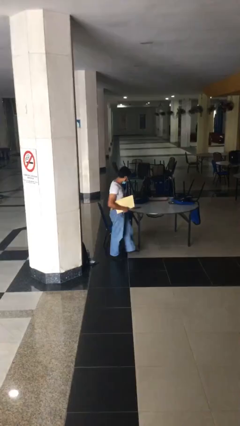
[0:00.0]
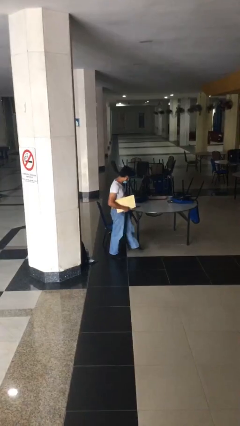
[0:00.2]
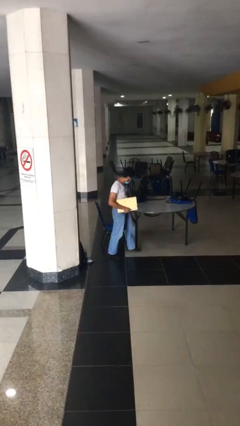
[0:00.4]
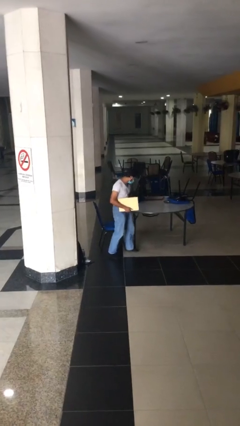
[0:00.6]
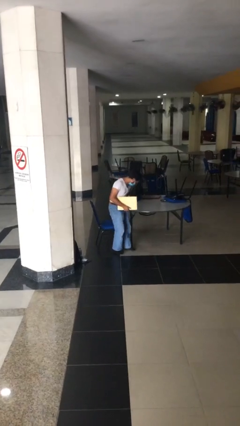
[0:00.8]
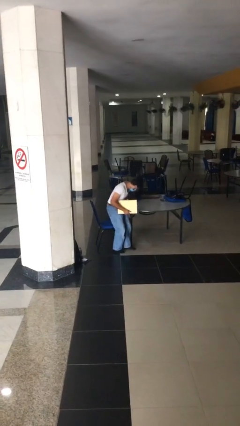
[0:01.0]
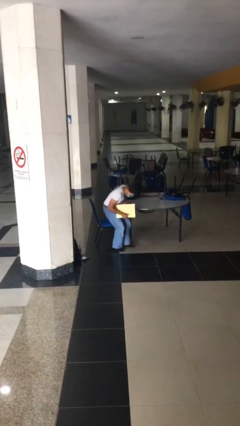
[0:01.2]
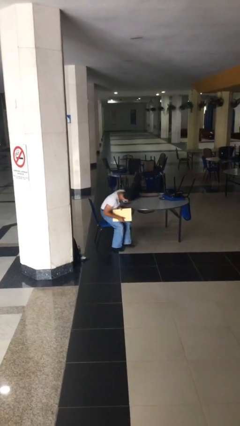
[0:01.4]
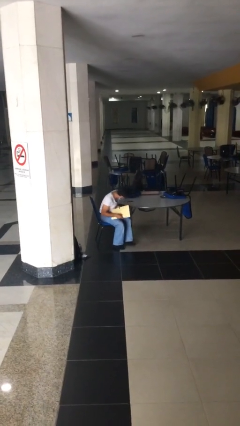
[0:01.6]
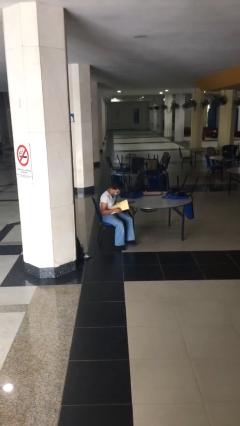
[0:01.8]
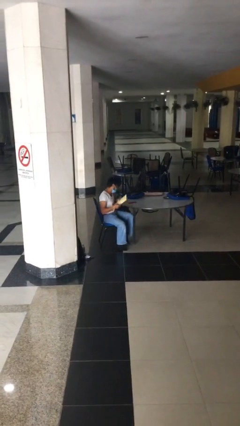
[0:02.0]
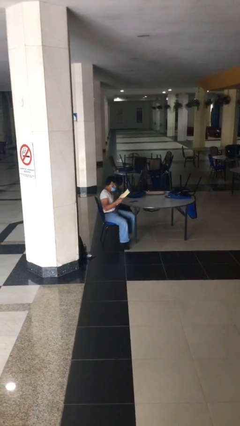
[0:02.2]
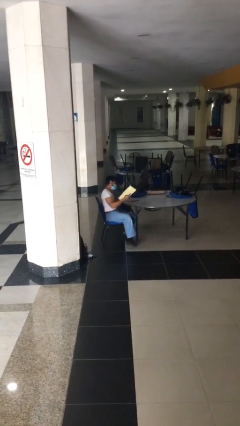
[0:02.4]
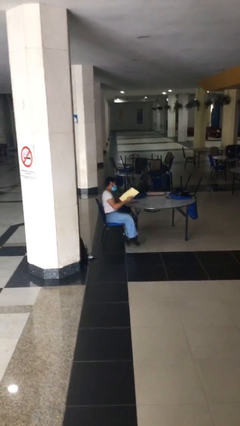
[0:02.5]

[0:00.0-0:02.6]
person sits down

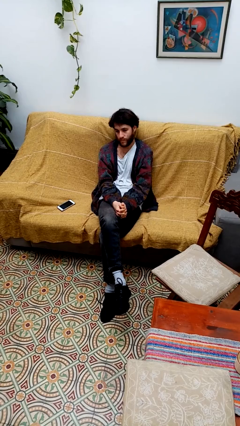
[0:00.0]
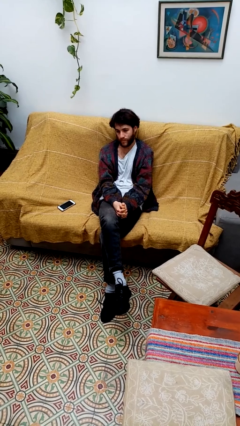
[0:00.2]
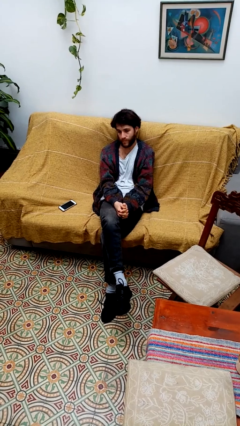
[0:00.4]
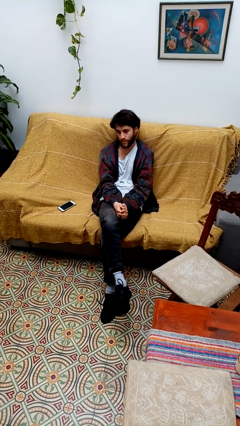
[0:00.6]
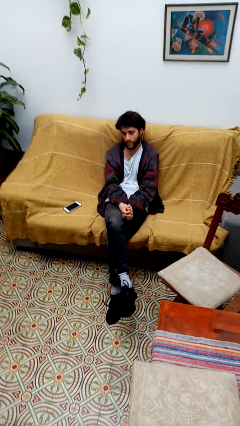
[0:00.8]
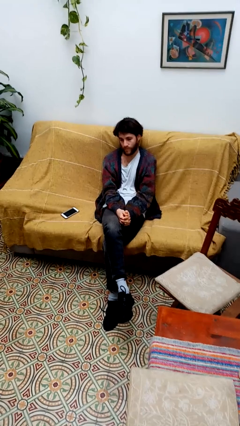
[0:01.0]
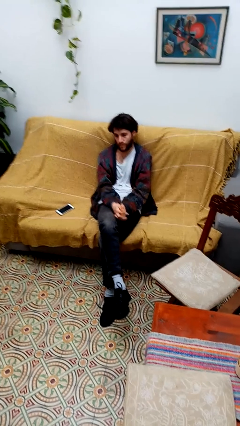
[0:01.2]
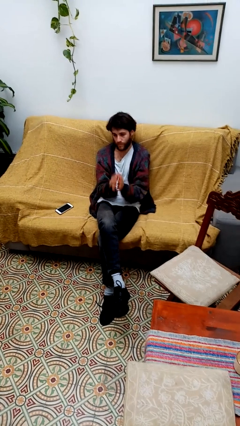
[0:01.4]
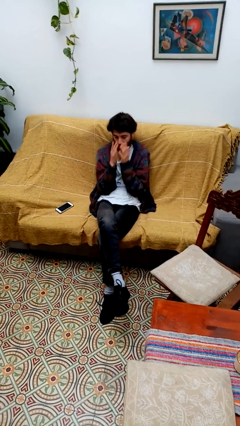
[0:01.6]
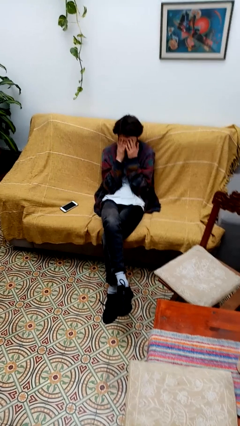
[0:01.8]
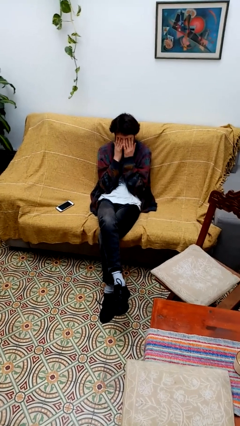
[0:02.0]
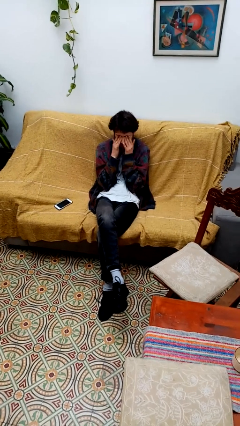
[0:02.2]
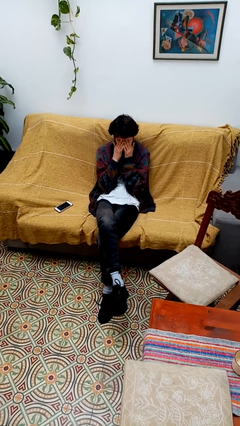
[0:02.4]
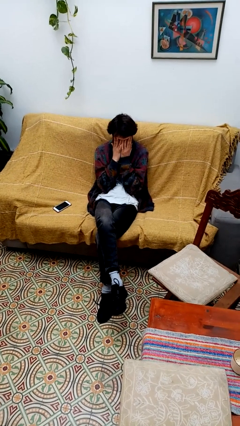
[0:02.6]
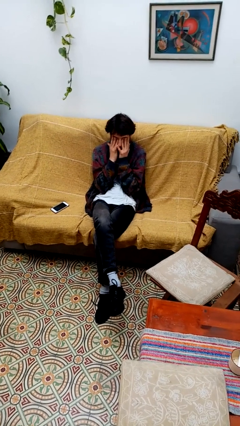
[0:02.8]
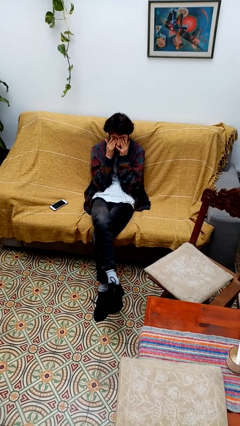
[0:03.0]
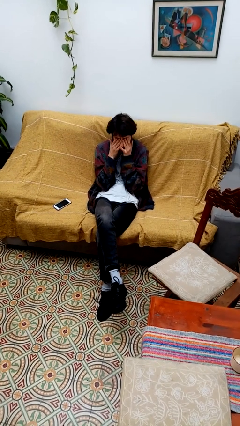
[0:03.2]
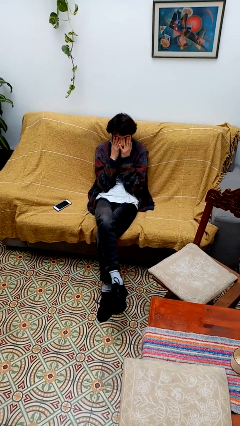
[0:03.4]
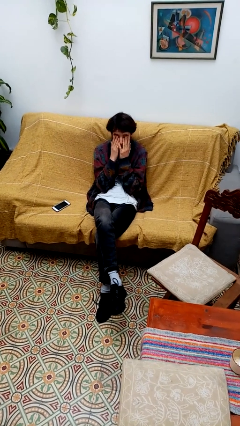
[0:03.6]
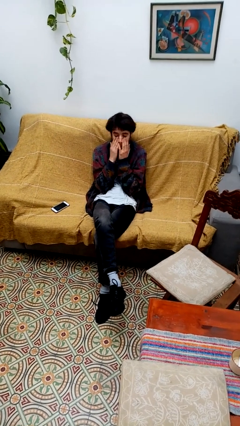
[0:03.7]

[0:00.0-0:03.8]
person rubs eyes

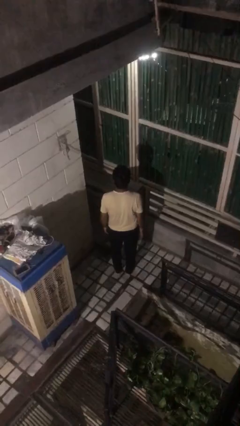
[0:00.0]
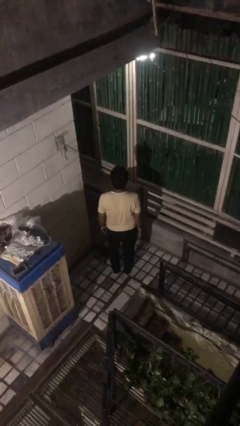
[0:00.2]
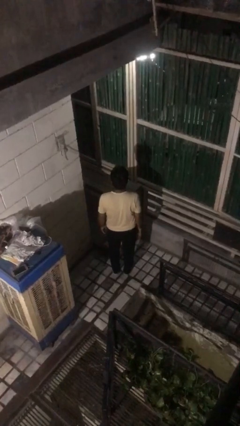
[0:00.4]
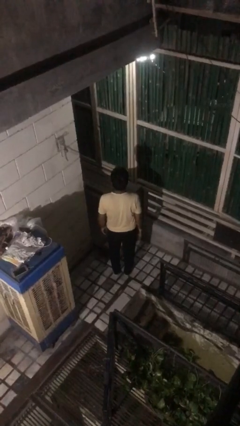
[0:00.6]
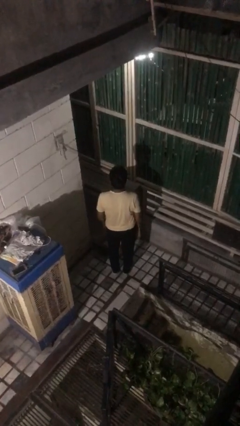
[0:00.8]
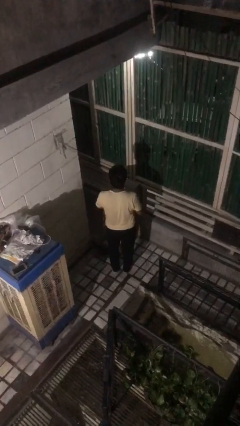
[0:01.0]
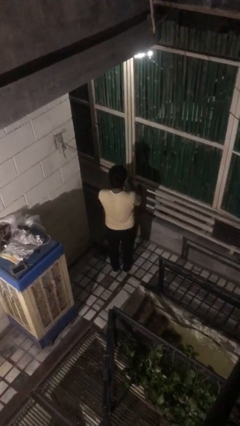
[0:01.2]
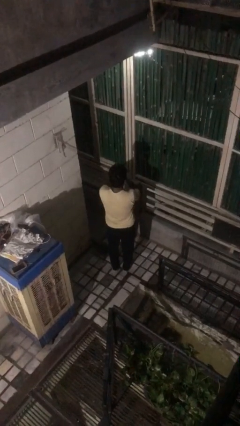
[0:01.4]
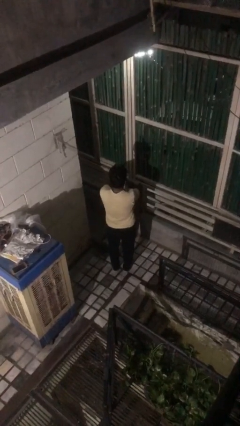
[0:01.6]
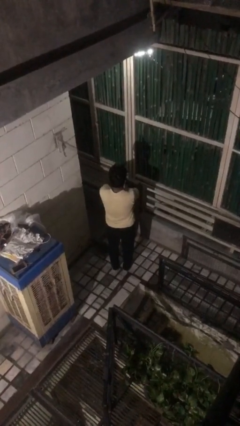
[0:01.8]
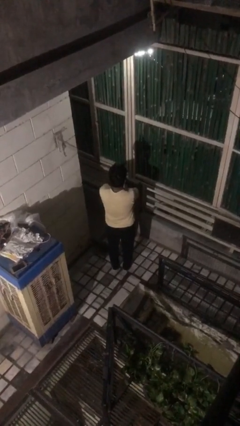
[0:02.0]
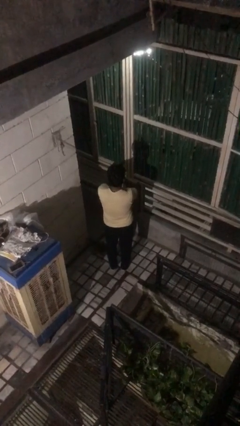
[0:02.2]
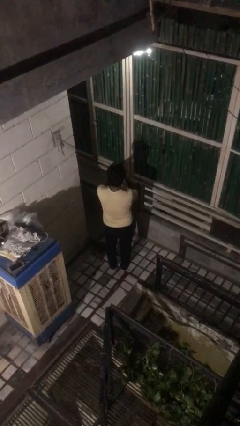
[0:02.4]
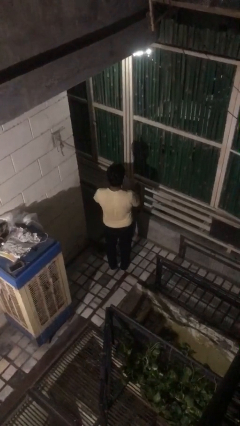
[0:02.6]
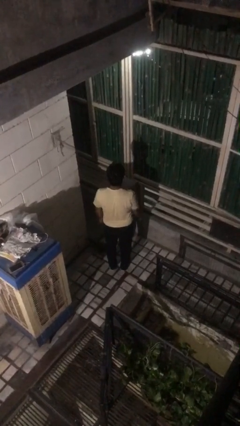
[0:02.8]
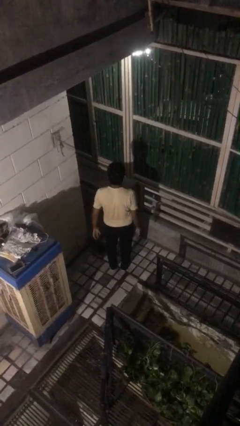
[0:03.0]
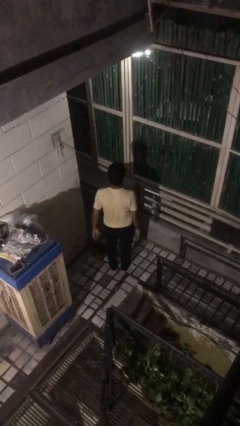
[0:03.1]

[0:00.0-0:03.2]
person covers face with hands

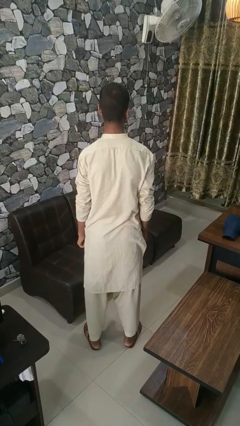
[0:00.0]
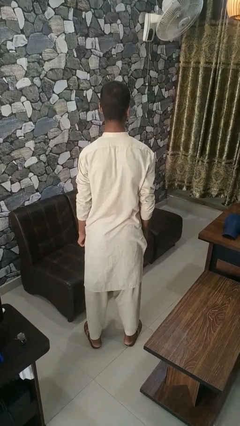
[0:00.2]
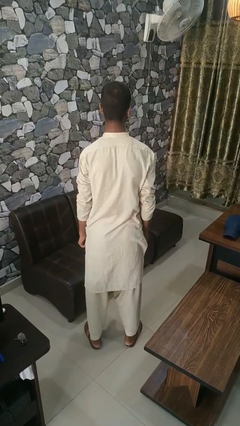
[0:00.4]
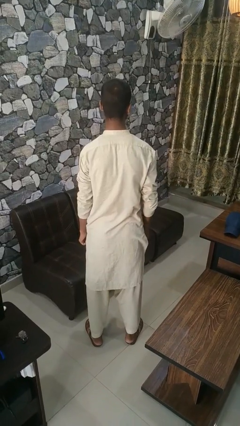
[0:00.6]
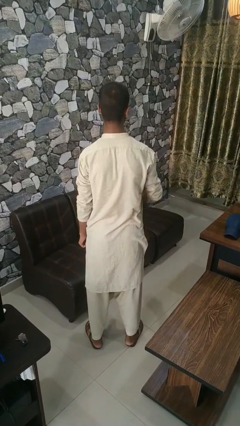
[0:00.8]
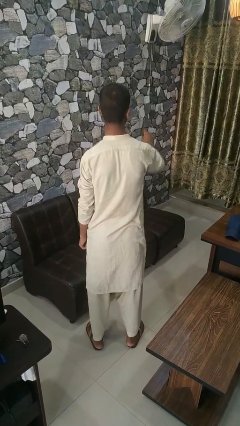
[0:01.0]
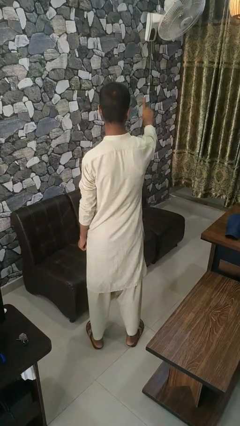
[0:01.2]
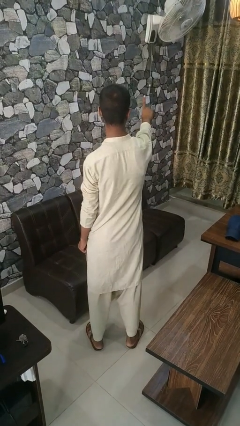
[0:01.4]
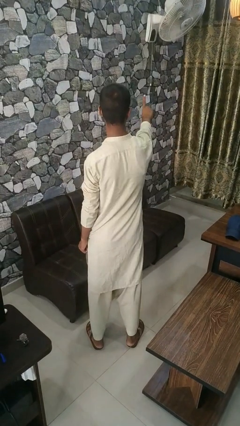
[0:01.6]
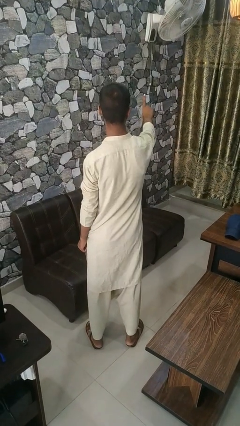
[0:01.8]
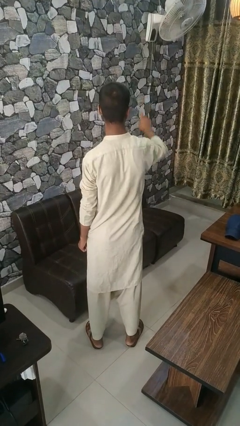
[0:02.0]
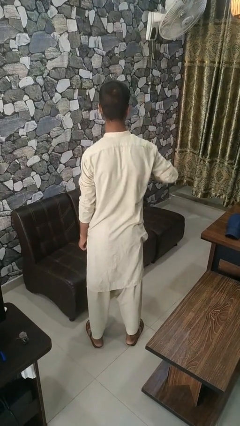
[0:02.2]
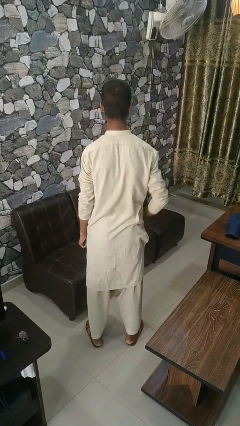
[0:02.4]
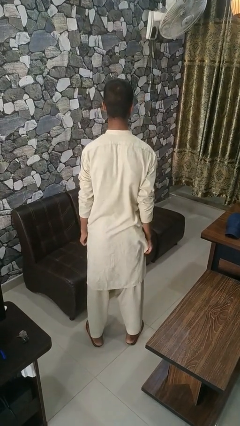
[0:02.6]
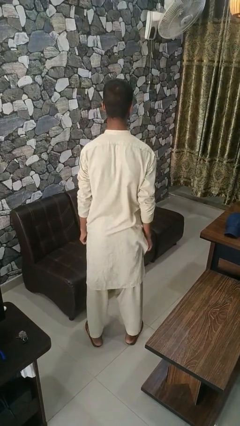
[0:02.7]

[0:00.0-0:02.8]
person gestures number one

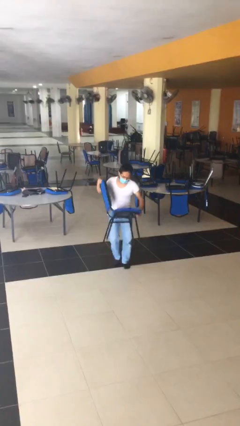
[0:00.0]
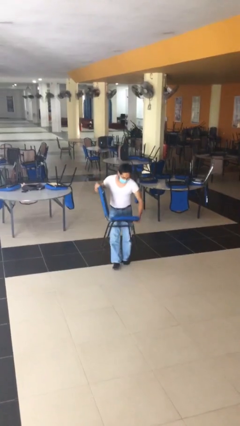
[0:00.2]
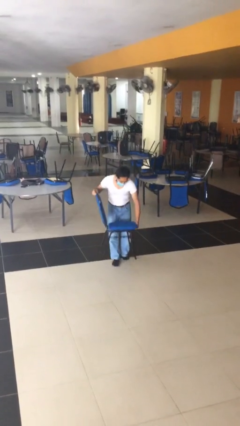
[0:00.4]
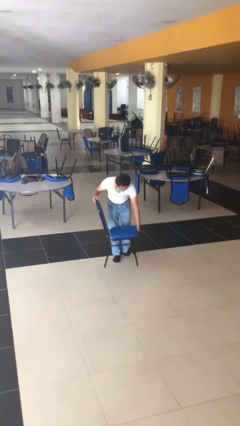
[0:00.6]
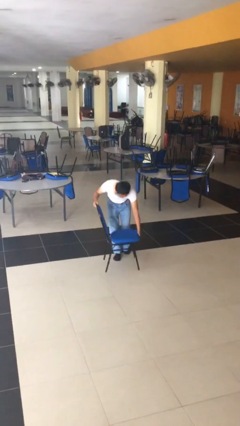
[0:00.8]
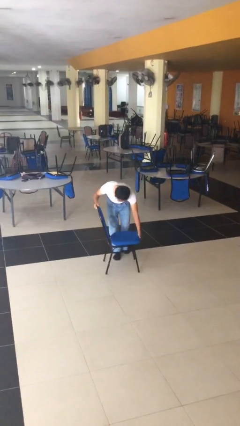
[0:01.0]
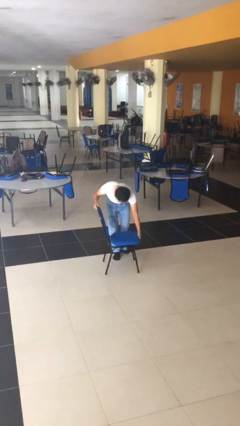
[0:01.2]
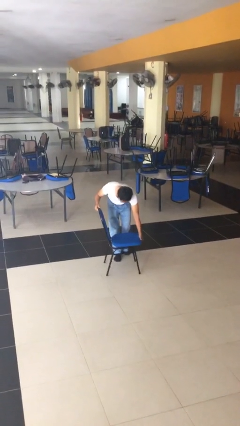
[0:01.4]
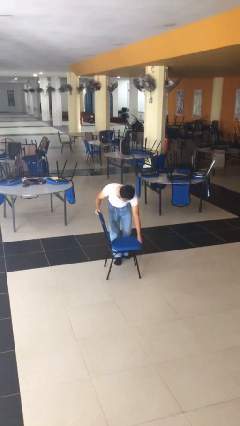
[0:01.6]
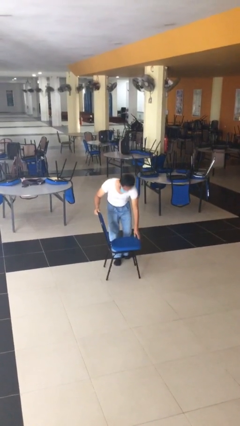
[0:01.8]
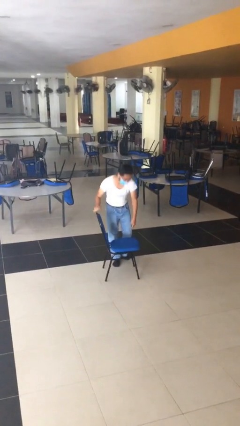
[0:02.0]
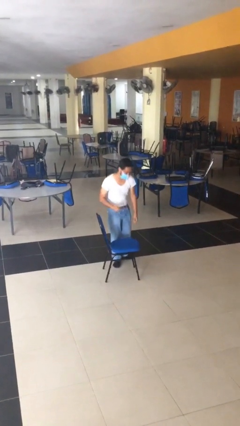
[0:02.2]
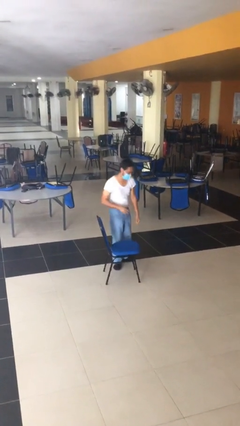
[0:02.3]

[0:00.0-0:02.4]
person puts down object on floor

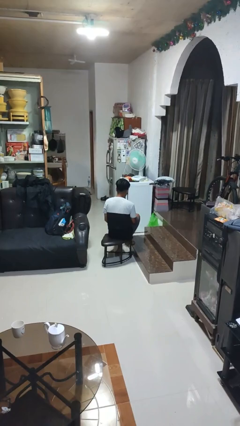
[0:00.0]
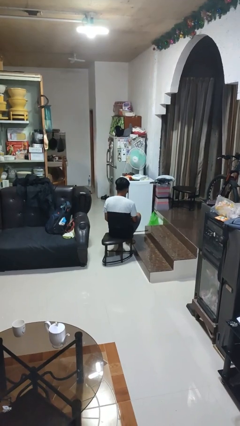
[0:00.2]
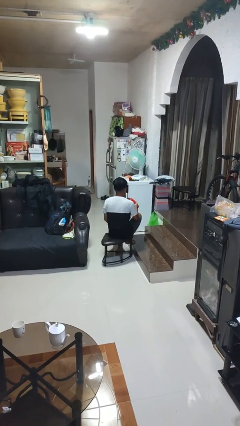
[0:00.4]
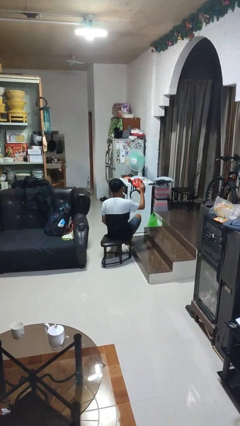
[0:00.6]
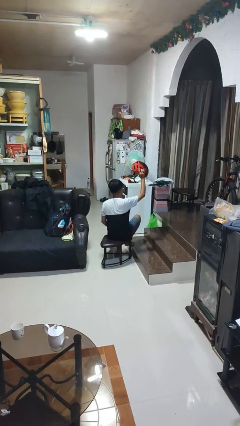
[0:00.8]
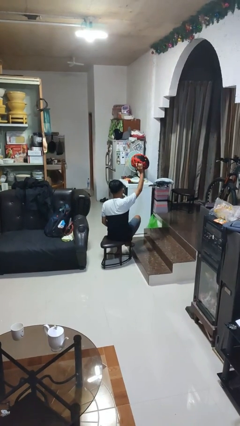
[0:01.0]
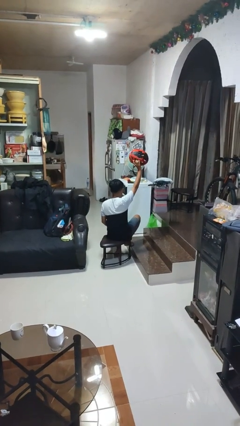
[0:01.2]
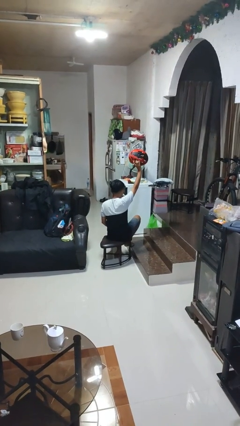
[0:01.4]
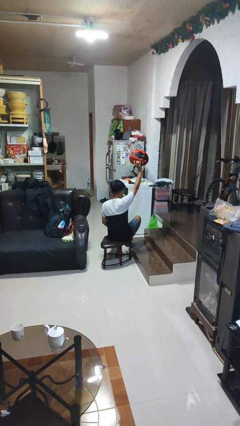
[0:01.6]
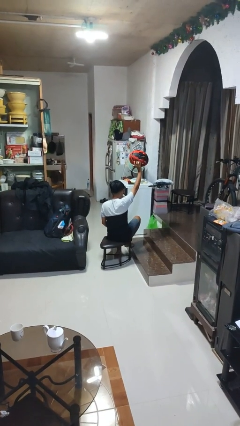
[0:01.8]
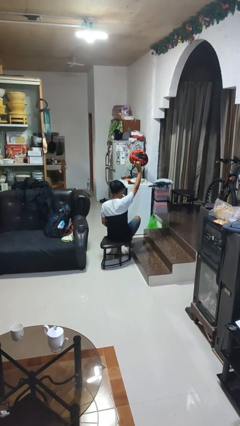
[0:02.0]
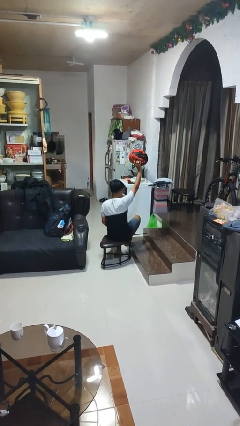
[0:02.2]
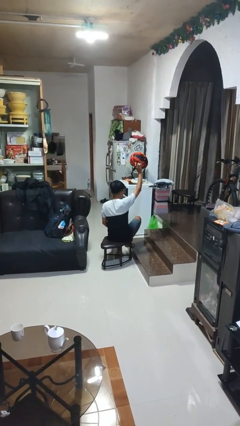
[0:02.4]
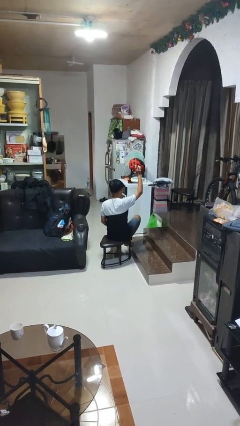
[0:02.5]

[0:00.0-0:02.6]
person holds object above head
